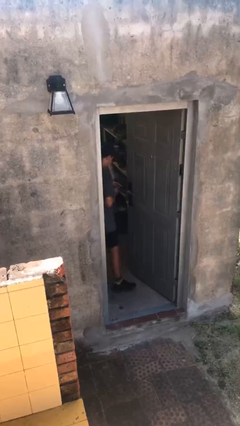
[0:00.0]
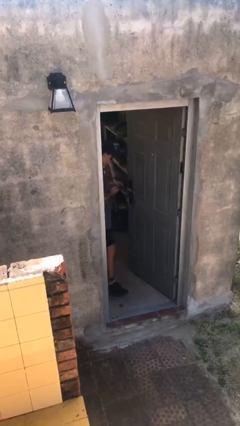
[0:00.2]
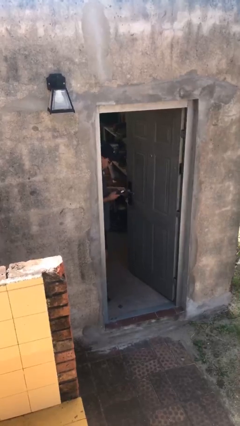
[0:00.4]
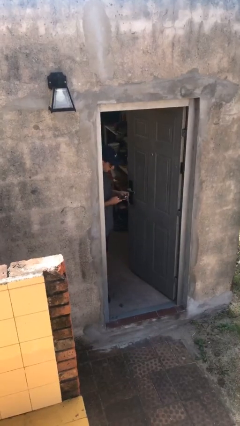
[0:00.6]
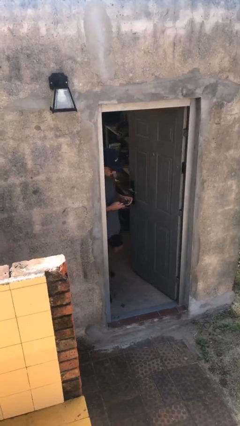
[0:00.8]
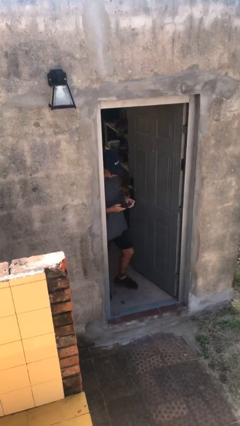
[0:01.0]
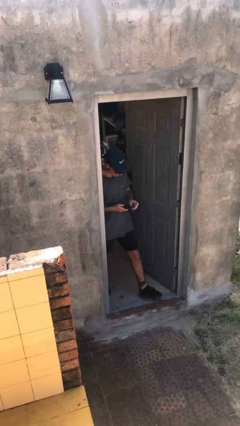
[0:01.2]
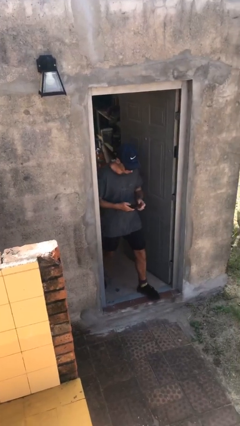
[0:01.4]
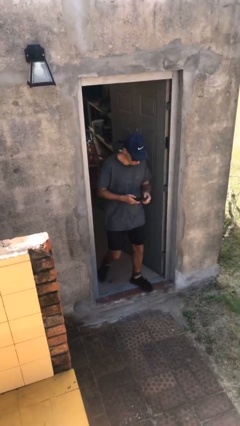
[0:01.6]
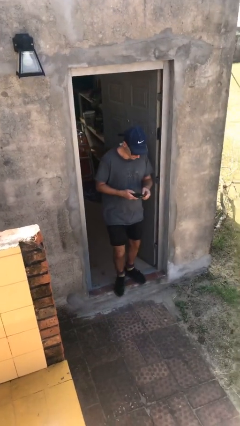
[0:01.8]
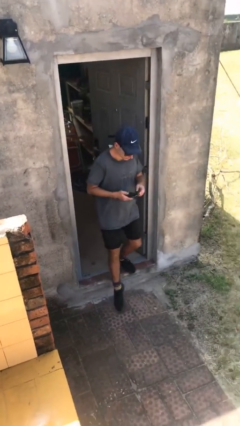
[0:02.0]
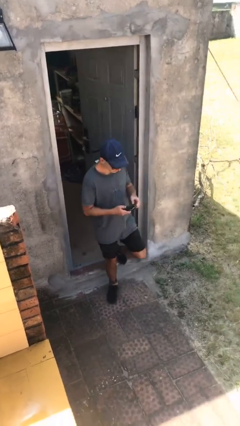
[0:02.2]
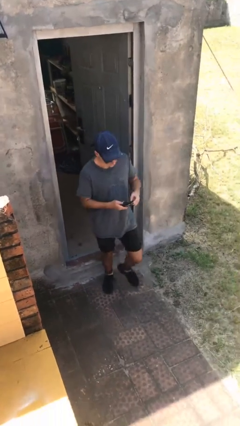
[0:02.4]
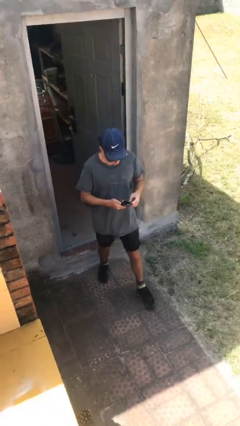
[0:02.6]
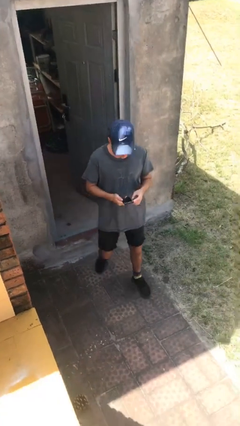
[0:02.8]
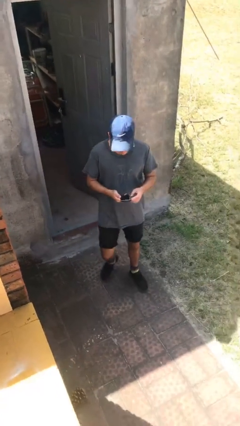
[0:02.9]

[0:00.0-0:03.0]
person enters scene through structure

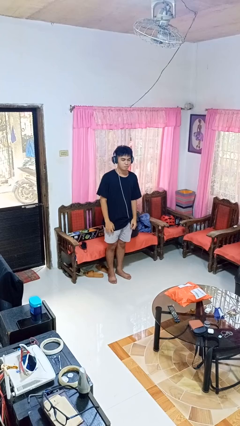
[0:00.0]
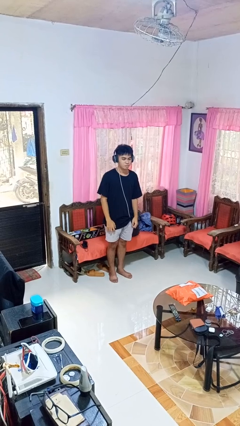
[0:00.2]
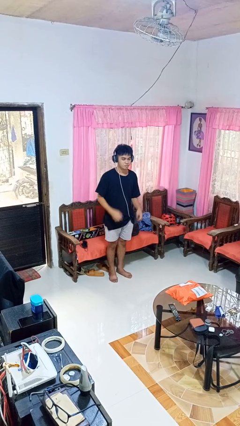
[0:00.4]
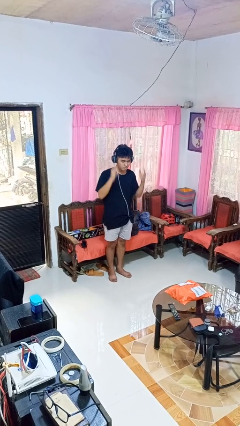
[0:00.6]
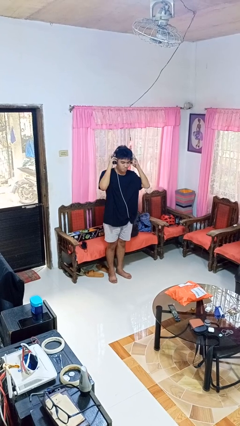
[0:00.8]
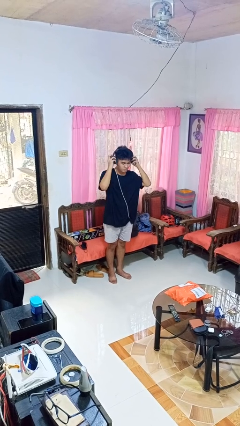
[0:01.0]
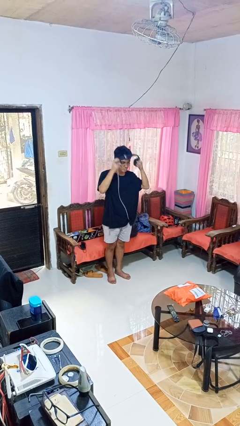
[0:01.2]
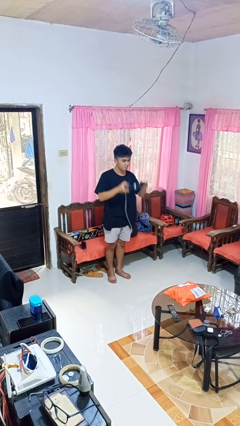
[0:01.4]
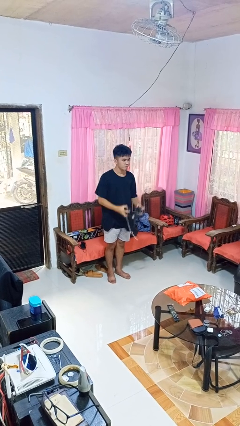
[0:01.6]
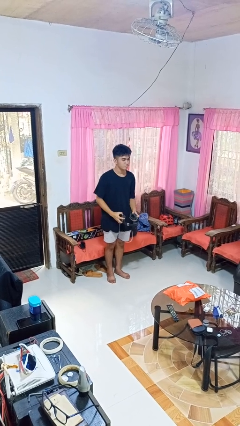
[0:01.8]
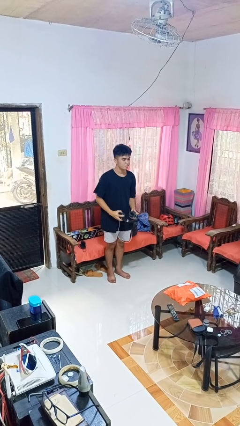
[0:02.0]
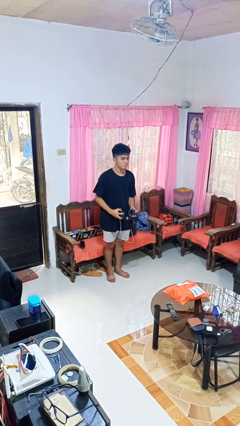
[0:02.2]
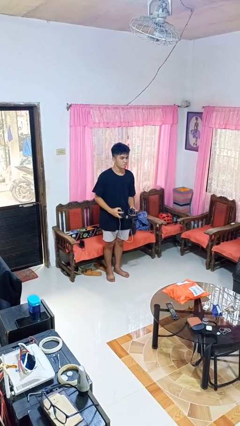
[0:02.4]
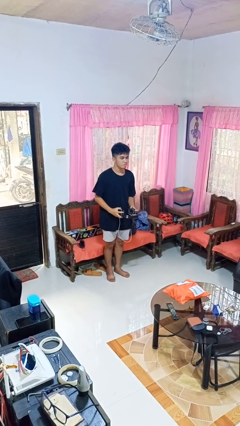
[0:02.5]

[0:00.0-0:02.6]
person takes off headphones

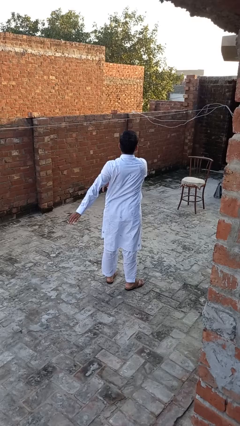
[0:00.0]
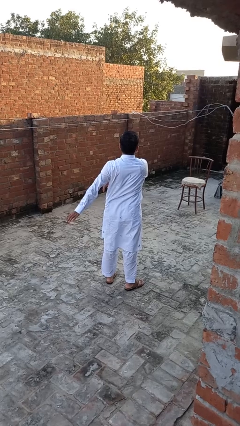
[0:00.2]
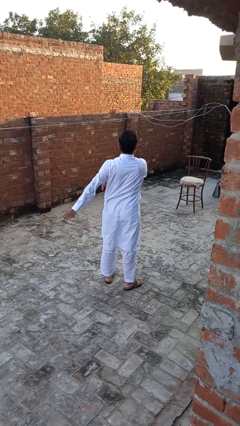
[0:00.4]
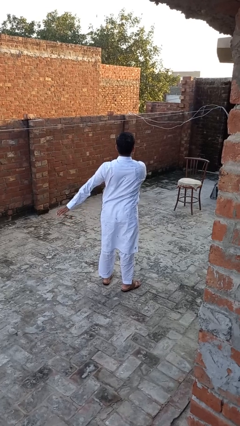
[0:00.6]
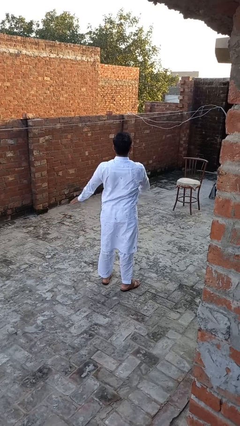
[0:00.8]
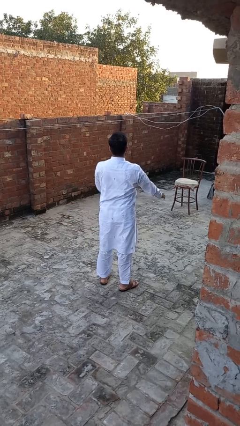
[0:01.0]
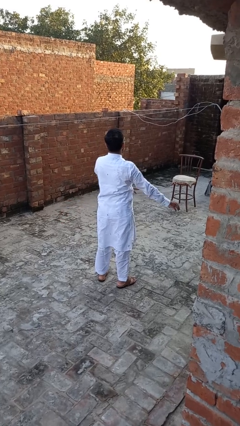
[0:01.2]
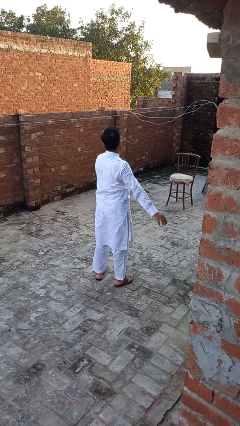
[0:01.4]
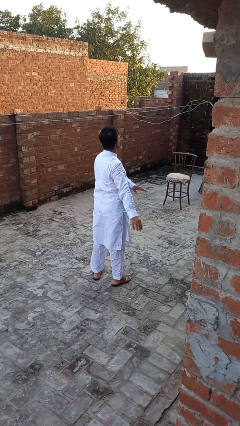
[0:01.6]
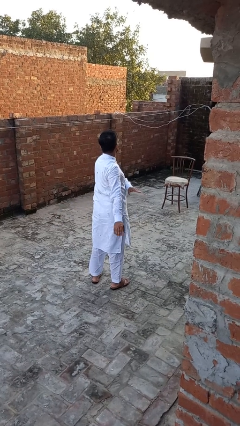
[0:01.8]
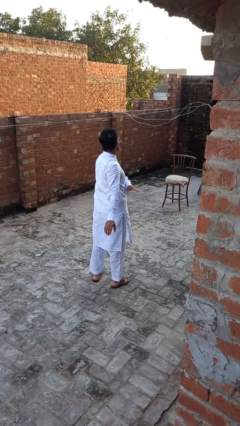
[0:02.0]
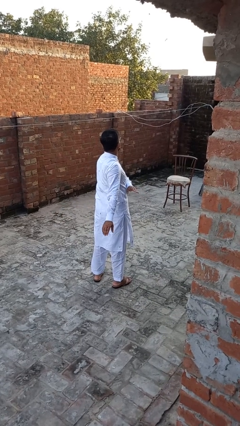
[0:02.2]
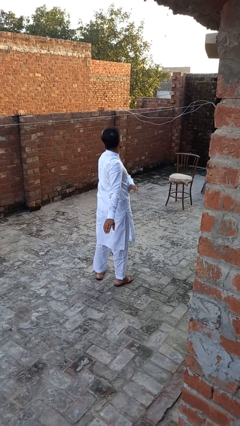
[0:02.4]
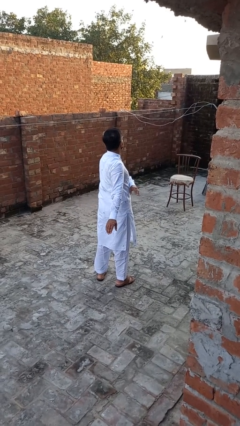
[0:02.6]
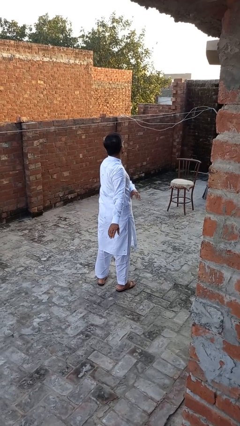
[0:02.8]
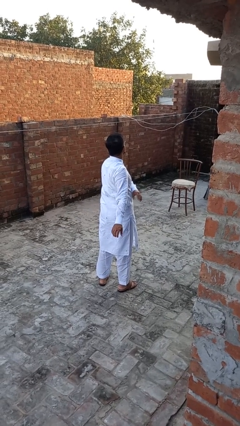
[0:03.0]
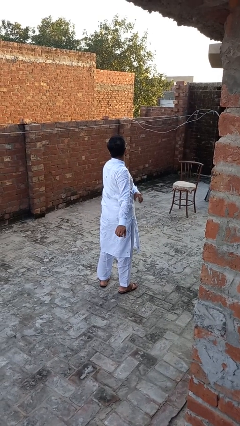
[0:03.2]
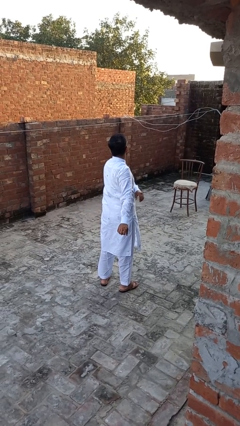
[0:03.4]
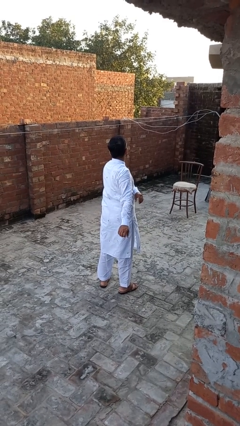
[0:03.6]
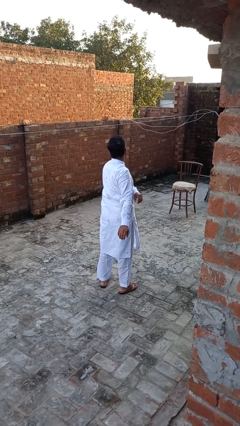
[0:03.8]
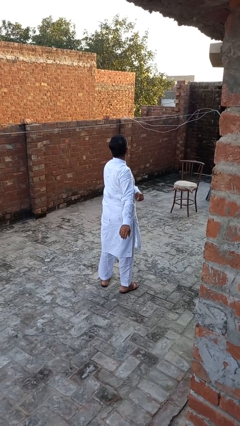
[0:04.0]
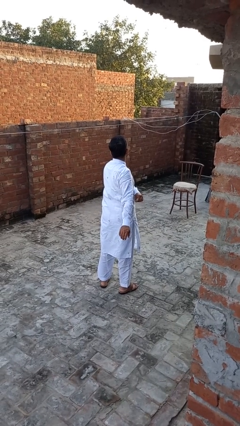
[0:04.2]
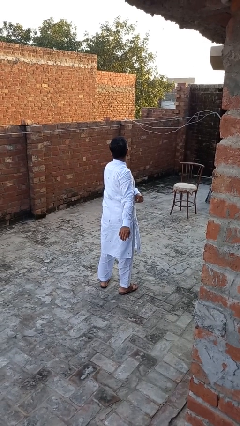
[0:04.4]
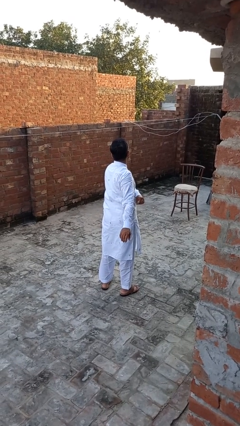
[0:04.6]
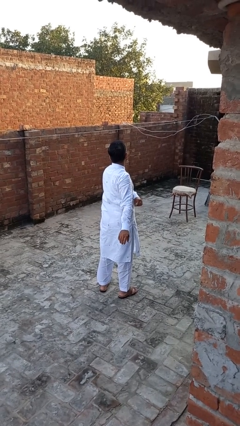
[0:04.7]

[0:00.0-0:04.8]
person gestures swipe right

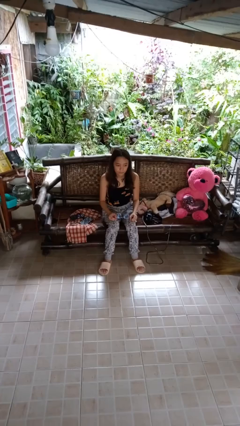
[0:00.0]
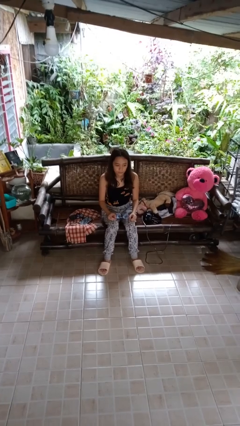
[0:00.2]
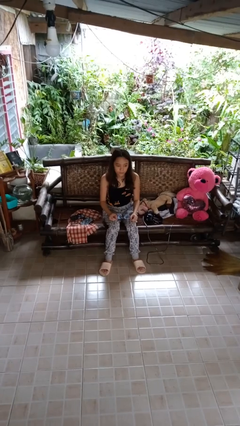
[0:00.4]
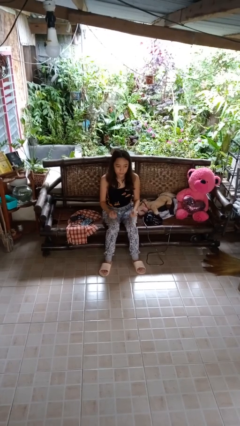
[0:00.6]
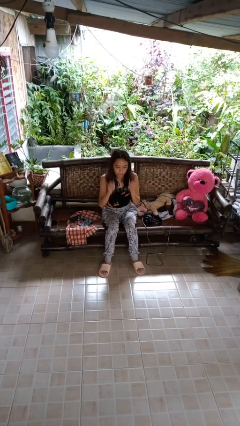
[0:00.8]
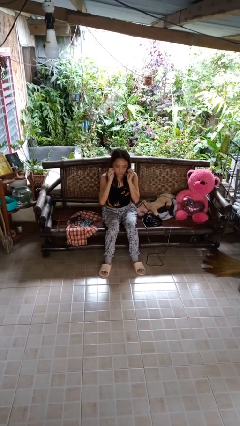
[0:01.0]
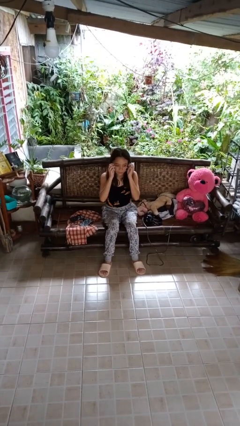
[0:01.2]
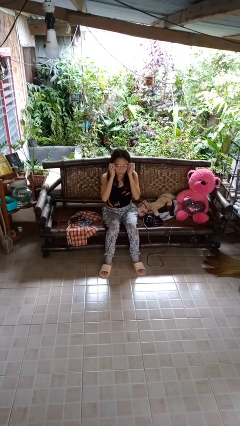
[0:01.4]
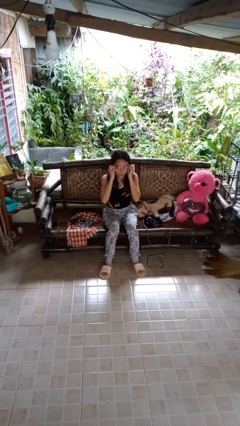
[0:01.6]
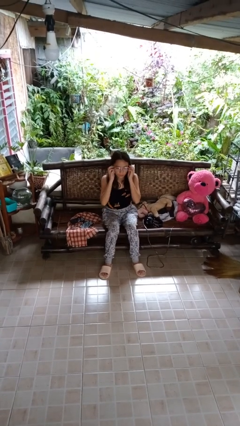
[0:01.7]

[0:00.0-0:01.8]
person puts on glasses

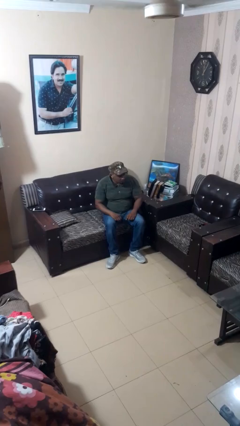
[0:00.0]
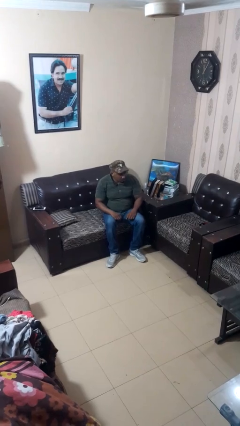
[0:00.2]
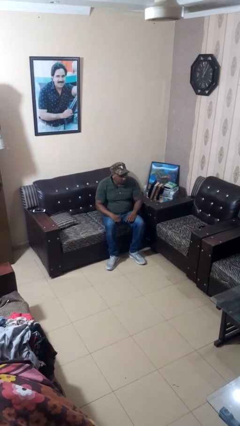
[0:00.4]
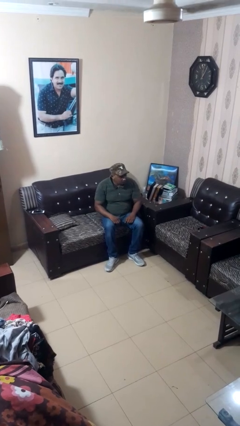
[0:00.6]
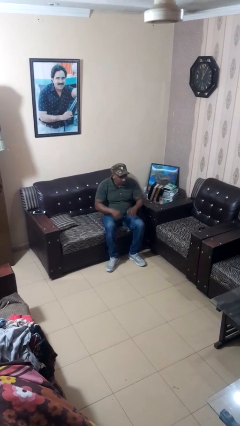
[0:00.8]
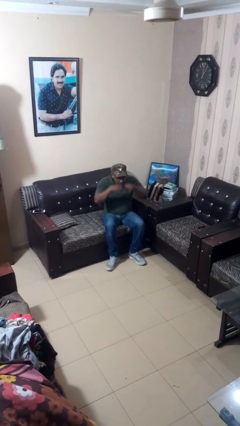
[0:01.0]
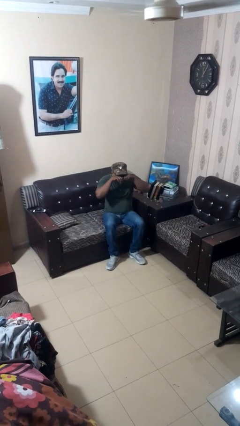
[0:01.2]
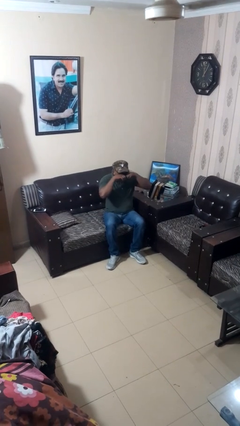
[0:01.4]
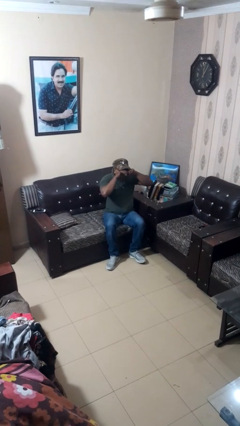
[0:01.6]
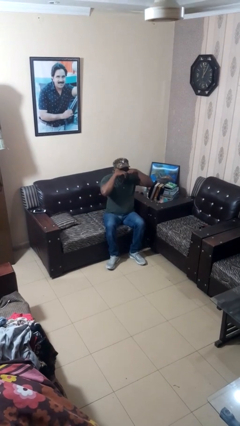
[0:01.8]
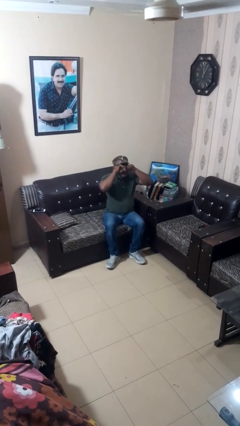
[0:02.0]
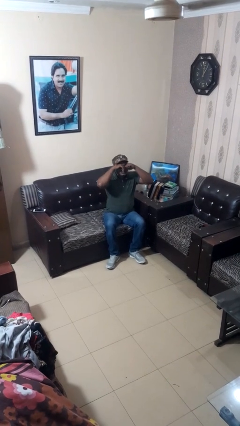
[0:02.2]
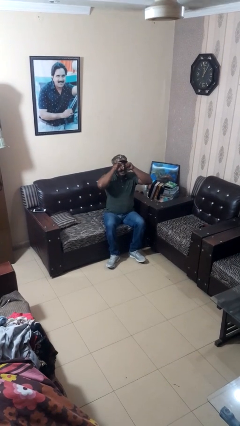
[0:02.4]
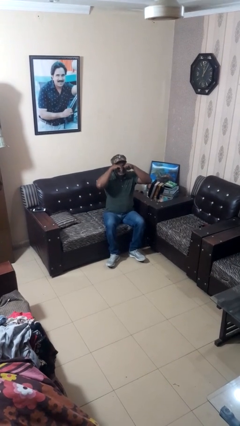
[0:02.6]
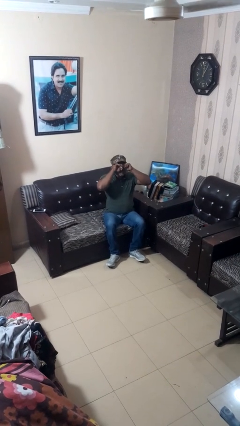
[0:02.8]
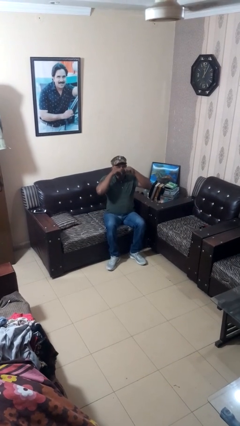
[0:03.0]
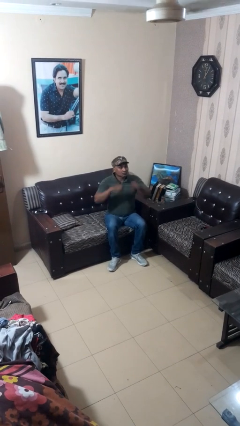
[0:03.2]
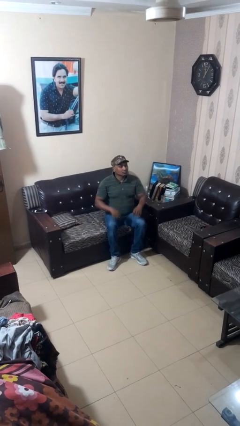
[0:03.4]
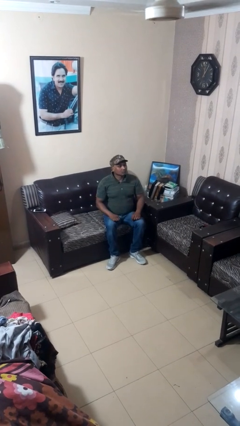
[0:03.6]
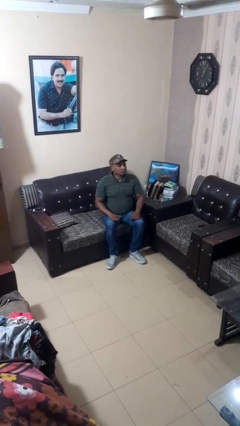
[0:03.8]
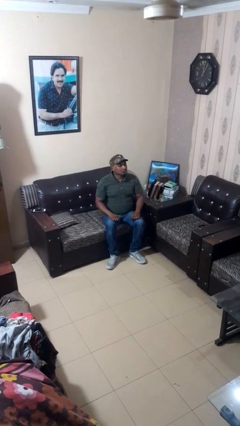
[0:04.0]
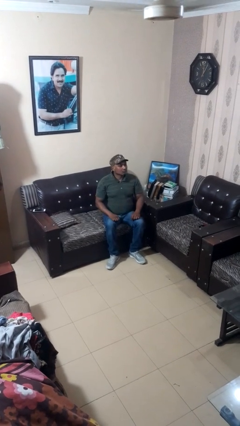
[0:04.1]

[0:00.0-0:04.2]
person rubs eyes

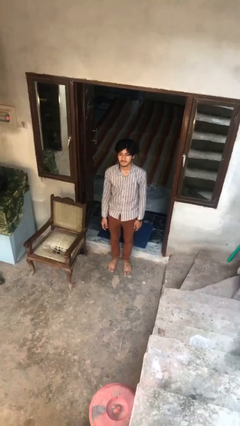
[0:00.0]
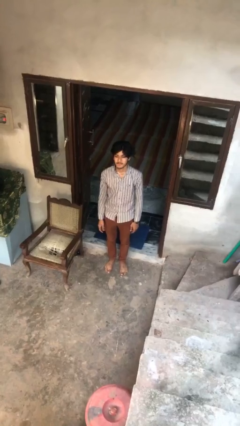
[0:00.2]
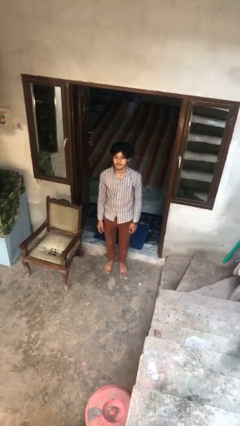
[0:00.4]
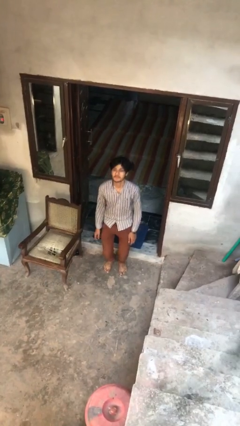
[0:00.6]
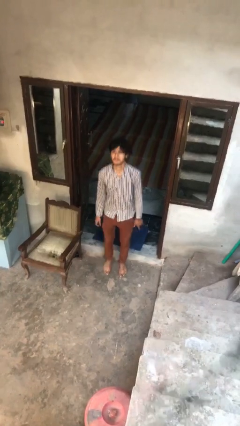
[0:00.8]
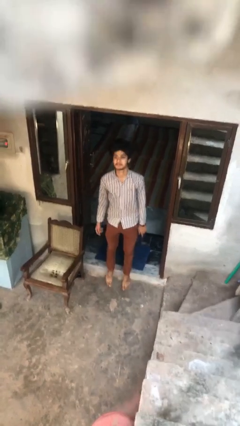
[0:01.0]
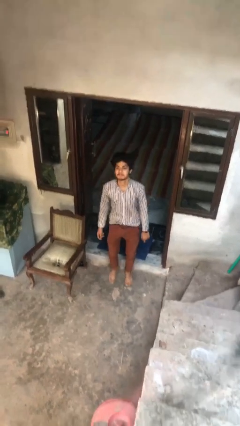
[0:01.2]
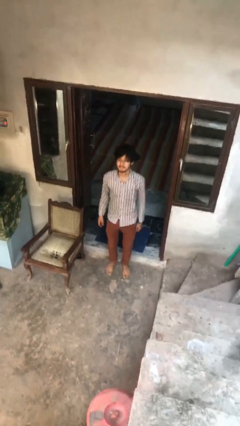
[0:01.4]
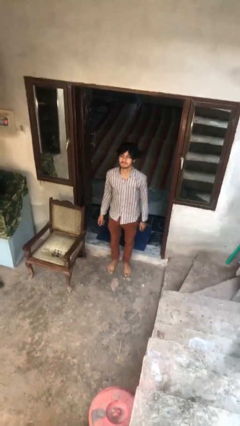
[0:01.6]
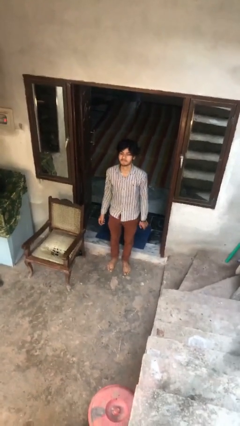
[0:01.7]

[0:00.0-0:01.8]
person jumps
